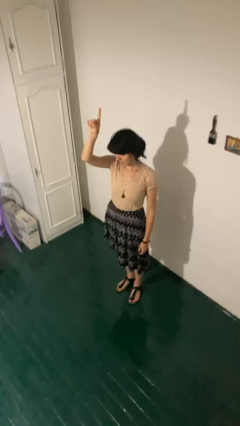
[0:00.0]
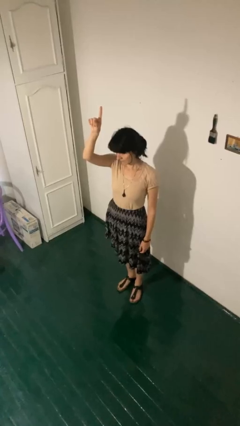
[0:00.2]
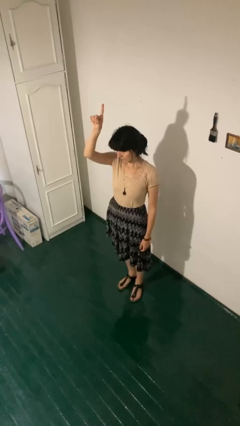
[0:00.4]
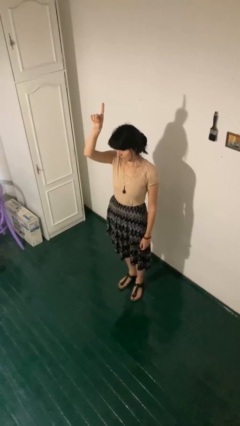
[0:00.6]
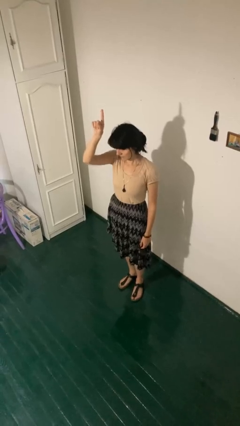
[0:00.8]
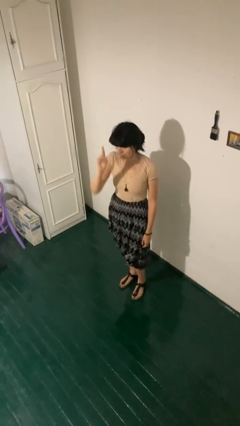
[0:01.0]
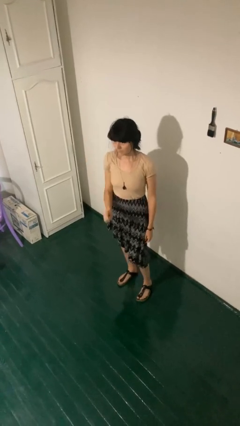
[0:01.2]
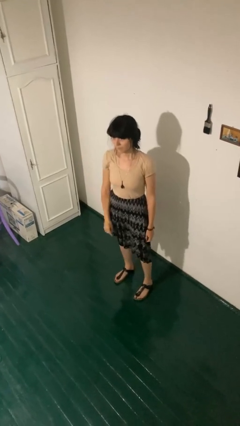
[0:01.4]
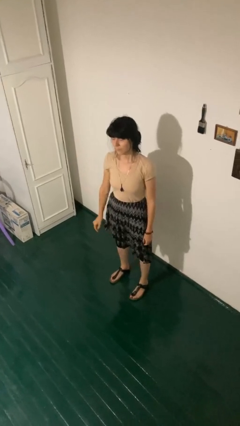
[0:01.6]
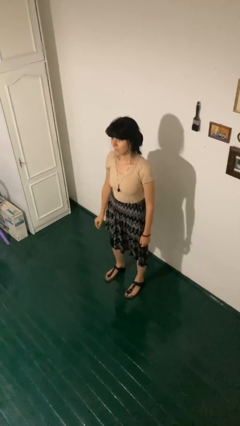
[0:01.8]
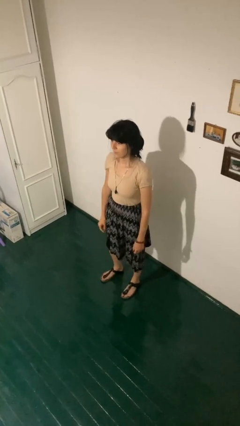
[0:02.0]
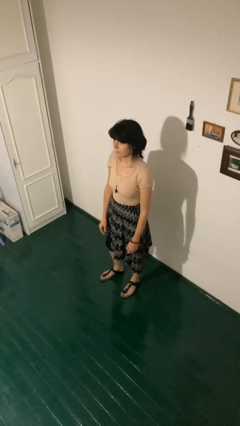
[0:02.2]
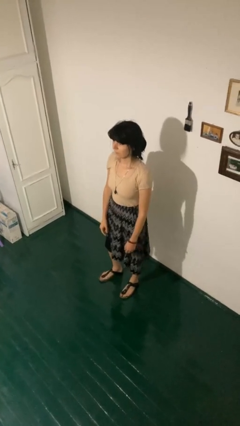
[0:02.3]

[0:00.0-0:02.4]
person gestures lower hand

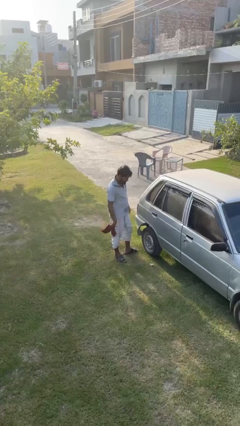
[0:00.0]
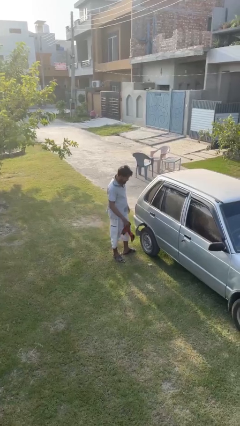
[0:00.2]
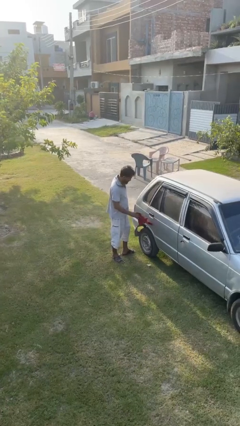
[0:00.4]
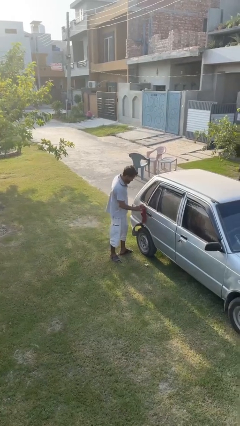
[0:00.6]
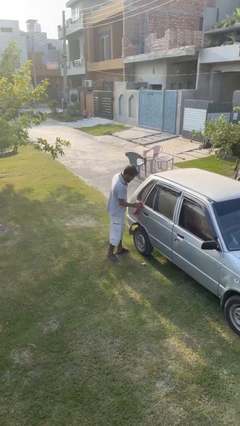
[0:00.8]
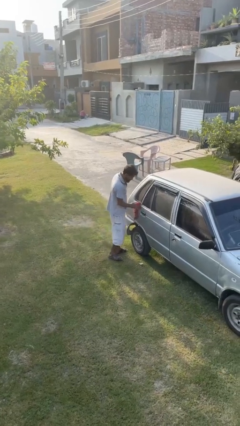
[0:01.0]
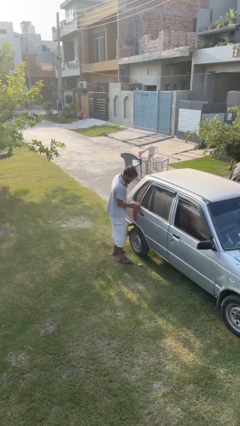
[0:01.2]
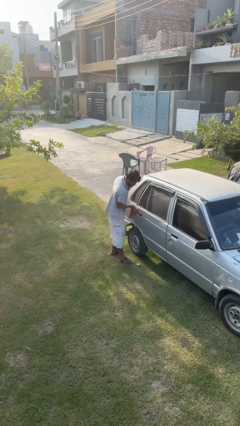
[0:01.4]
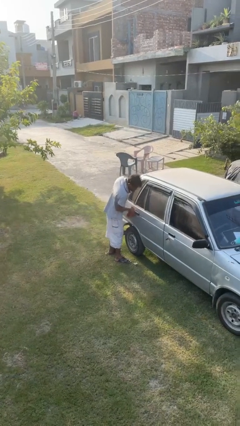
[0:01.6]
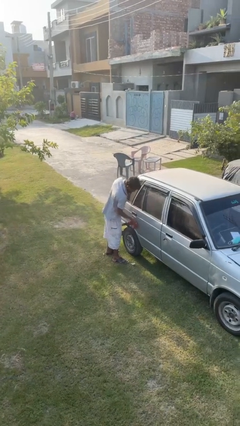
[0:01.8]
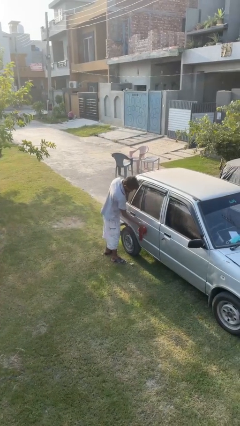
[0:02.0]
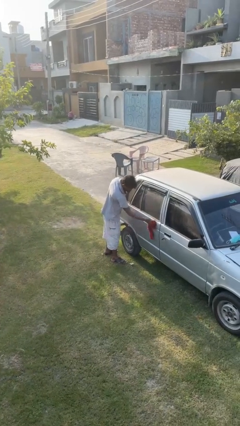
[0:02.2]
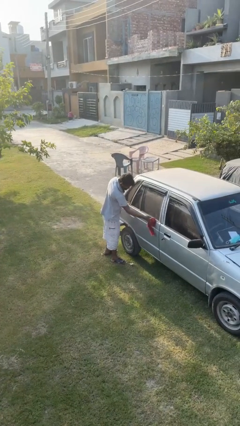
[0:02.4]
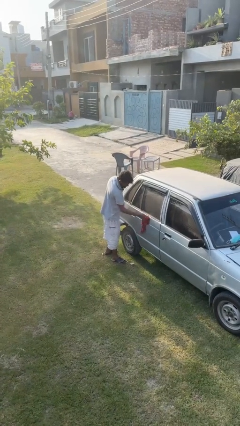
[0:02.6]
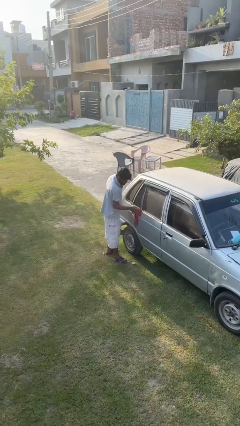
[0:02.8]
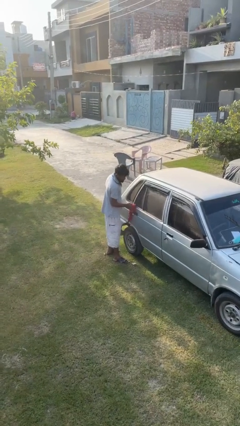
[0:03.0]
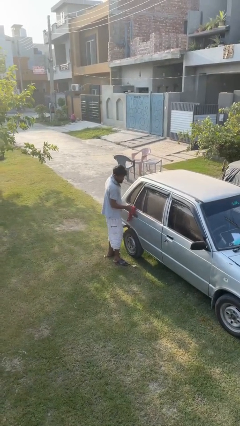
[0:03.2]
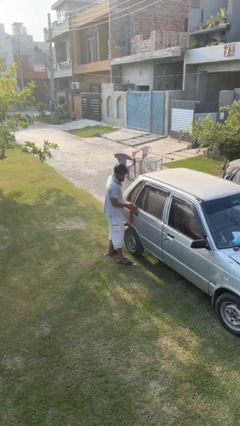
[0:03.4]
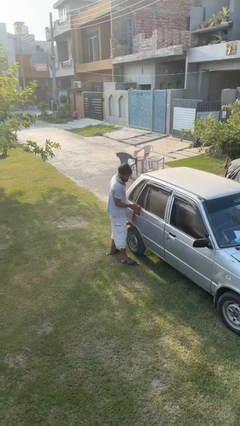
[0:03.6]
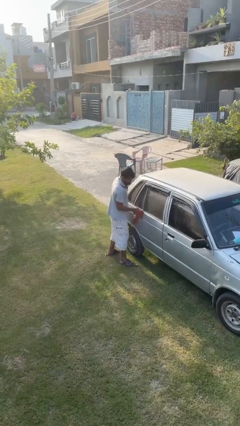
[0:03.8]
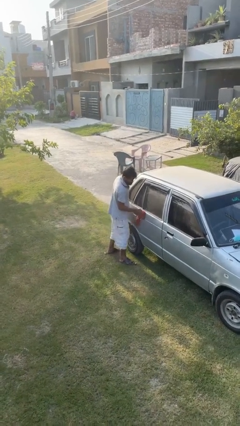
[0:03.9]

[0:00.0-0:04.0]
person polishes car with rag

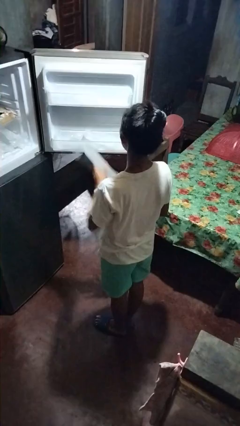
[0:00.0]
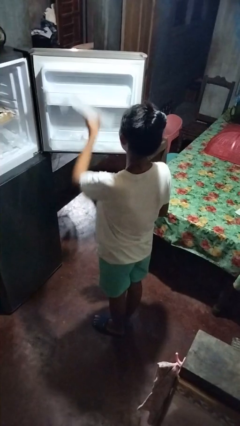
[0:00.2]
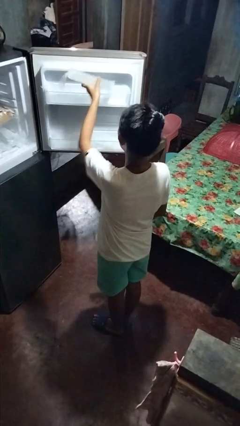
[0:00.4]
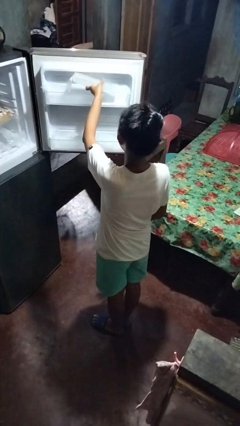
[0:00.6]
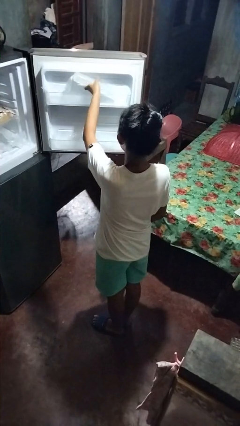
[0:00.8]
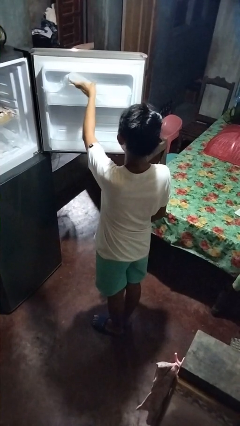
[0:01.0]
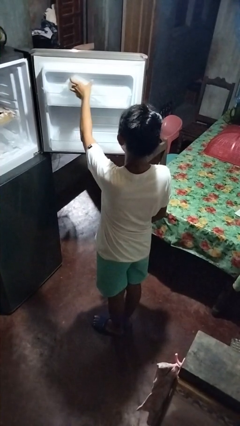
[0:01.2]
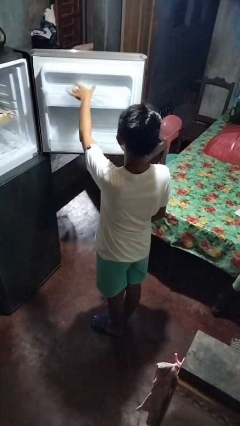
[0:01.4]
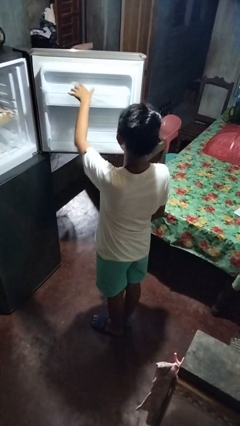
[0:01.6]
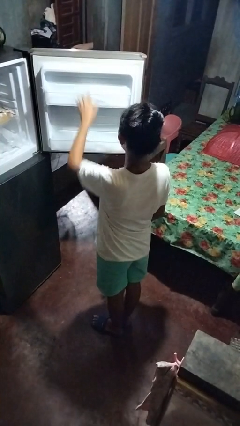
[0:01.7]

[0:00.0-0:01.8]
person puts object into refrigerator

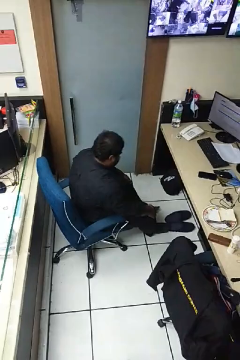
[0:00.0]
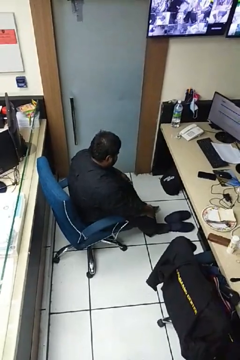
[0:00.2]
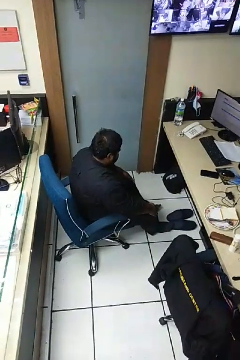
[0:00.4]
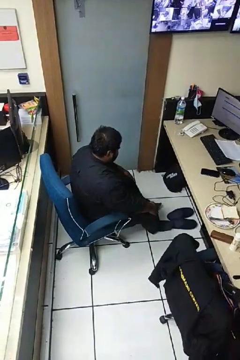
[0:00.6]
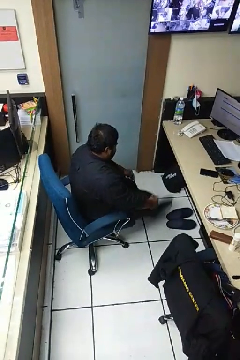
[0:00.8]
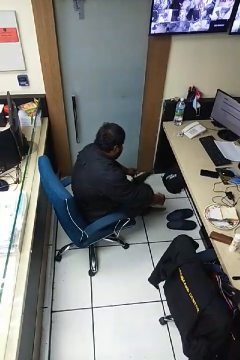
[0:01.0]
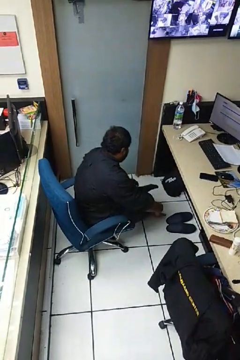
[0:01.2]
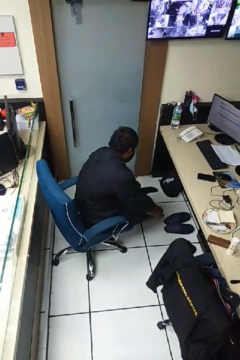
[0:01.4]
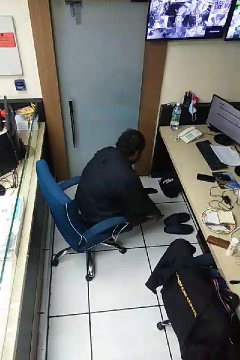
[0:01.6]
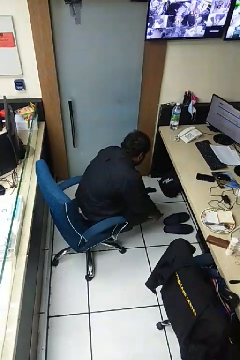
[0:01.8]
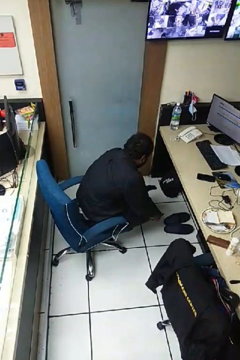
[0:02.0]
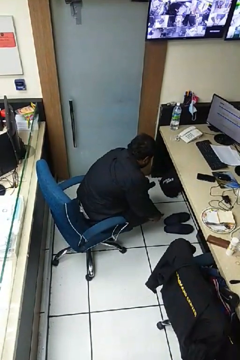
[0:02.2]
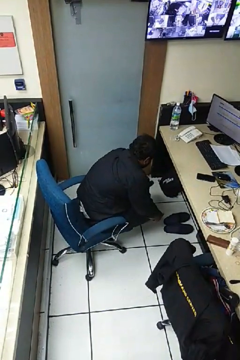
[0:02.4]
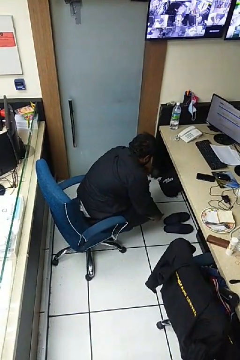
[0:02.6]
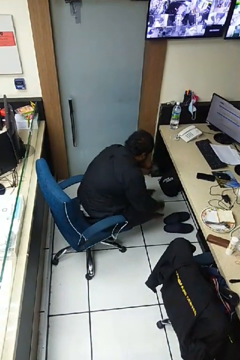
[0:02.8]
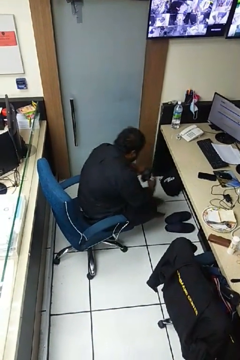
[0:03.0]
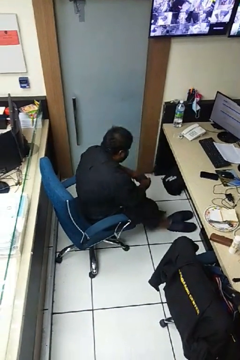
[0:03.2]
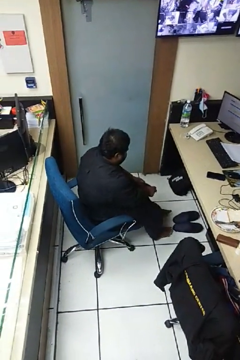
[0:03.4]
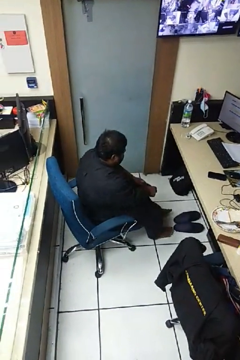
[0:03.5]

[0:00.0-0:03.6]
person takes off socks

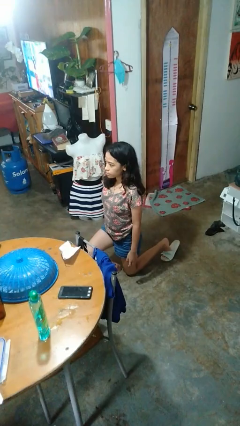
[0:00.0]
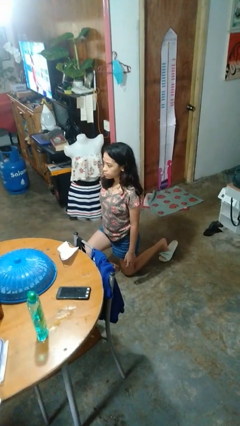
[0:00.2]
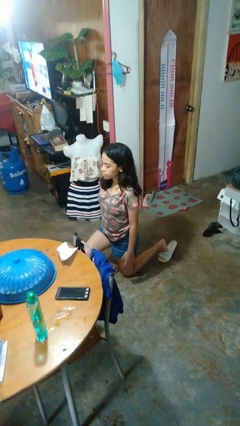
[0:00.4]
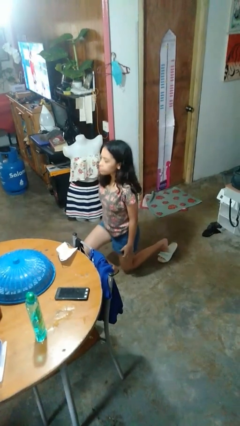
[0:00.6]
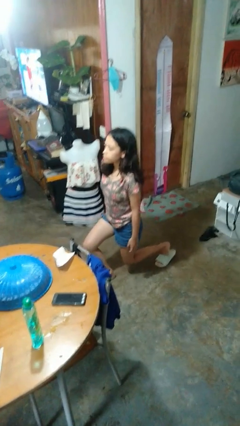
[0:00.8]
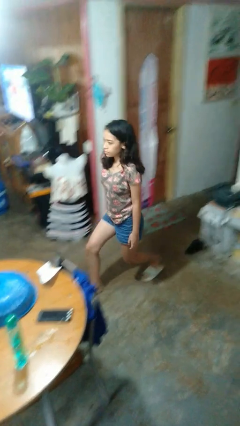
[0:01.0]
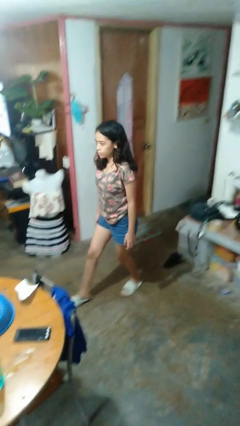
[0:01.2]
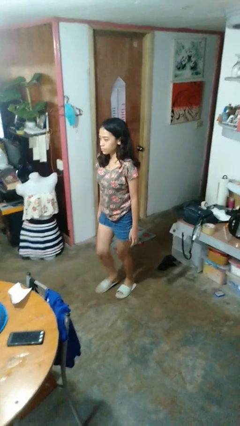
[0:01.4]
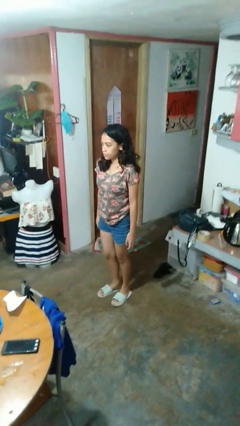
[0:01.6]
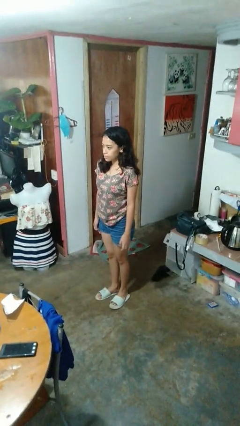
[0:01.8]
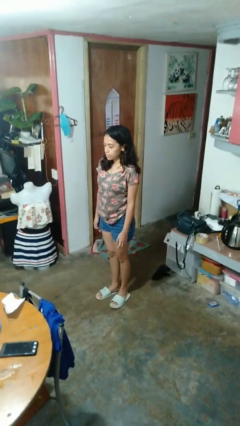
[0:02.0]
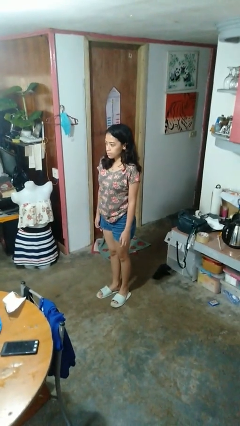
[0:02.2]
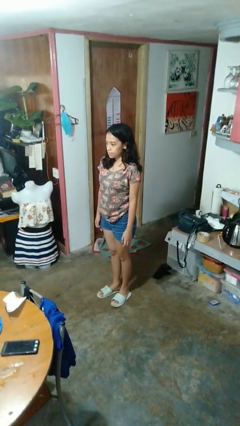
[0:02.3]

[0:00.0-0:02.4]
person stands up from floor

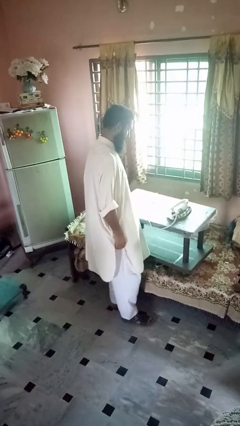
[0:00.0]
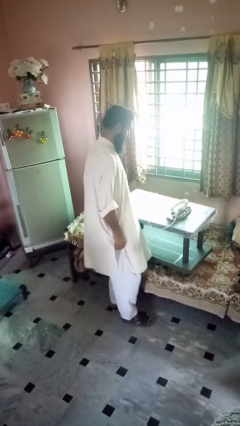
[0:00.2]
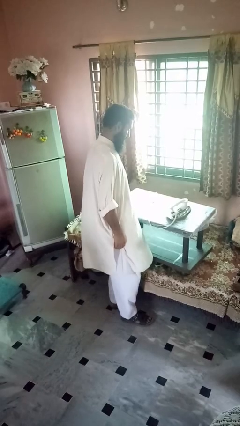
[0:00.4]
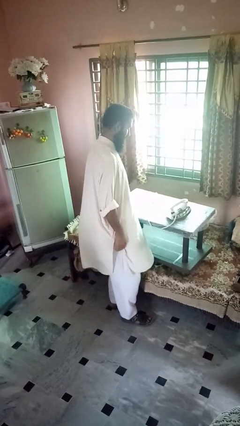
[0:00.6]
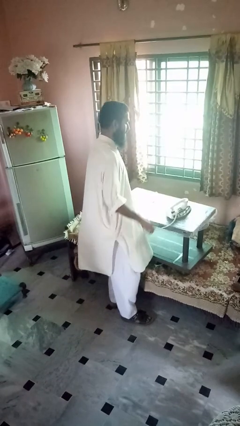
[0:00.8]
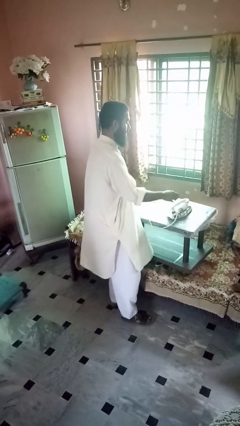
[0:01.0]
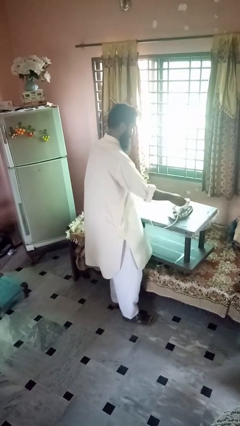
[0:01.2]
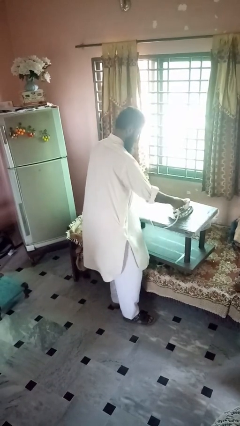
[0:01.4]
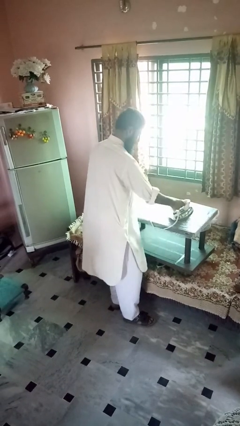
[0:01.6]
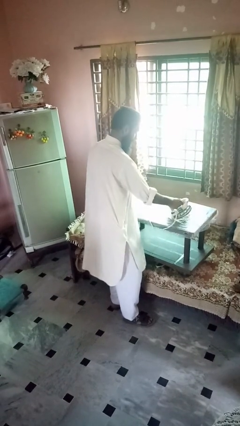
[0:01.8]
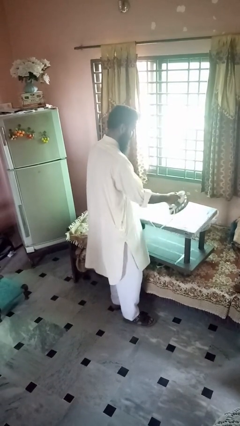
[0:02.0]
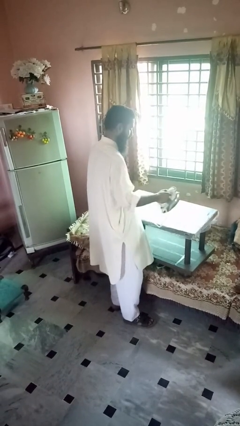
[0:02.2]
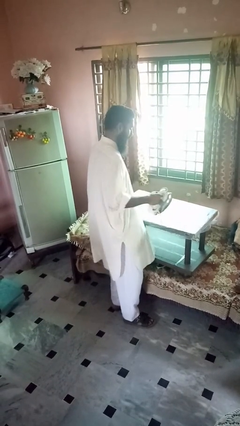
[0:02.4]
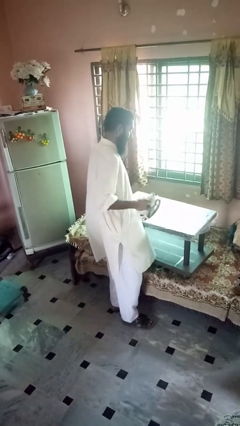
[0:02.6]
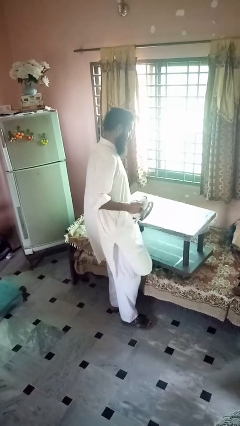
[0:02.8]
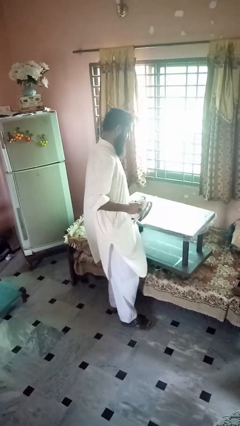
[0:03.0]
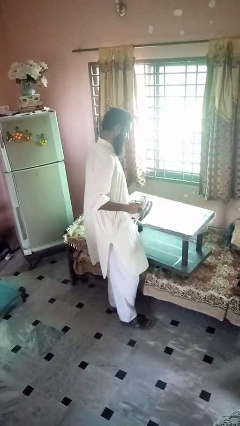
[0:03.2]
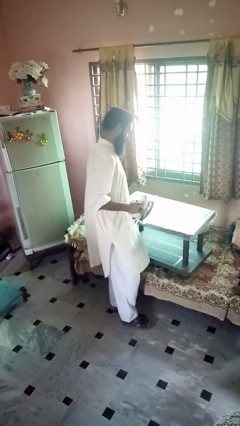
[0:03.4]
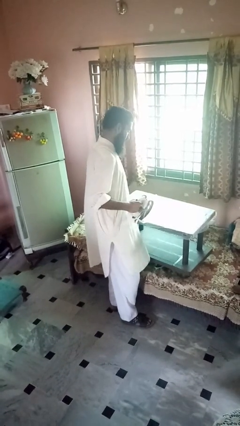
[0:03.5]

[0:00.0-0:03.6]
person picks up object from countertop

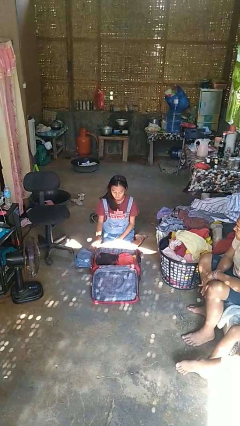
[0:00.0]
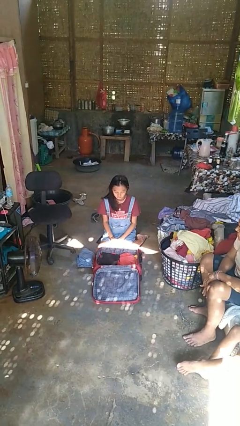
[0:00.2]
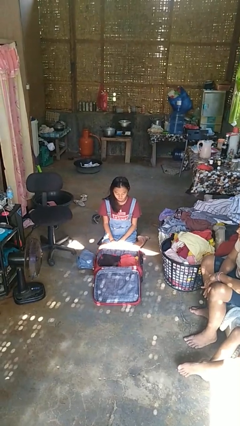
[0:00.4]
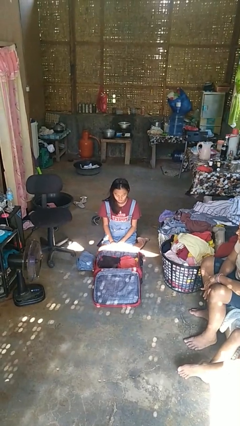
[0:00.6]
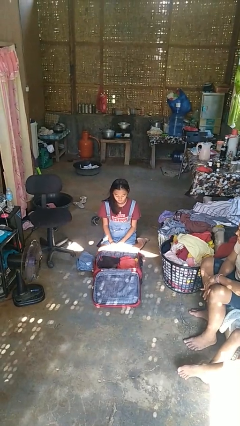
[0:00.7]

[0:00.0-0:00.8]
person unloads clothes from suitcase
